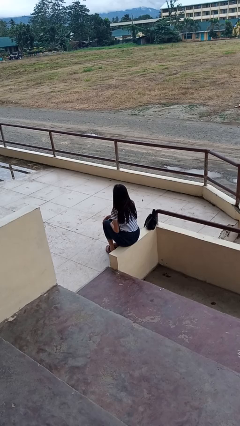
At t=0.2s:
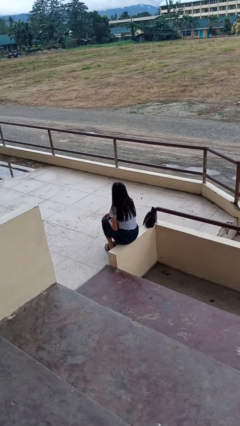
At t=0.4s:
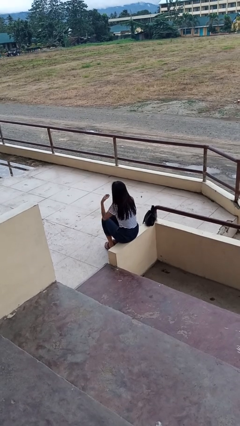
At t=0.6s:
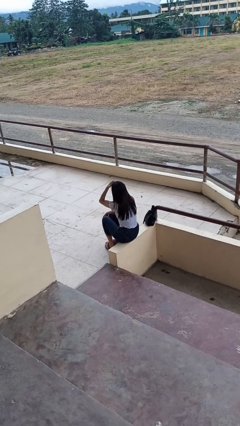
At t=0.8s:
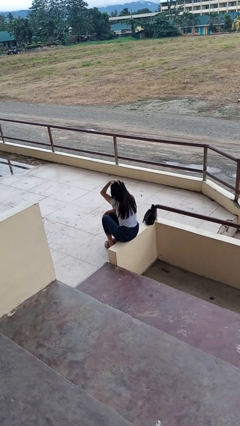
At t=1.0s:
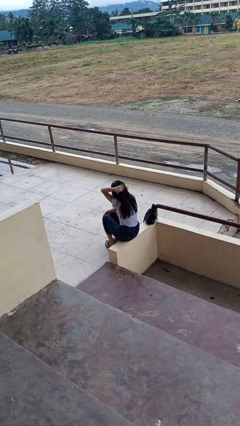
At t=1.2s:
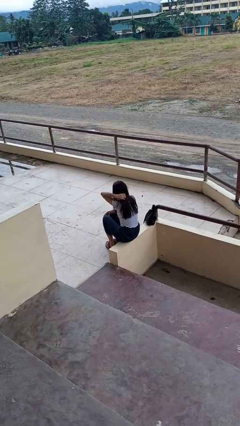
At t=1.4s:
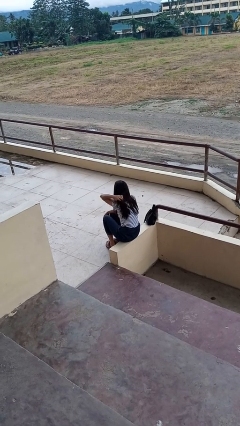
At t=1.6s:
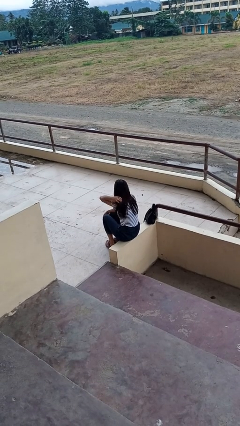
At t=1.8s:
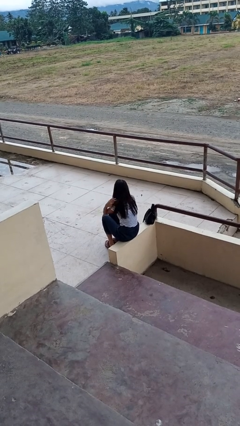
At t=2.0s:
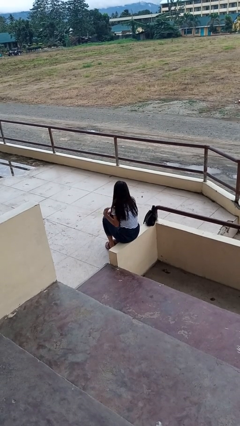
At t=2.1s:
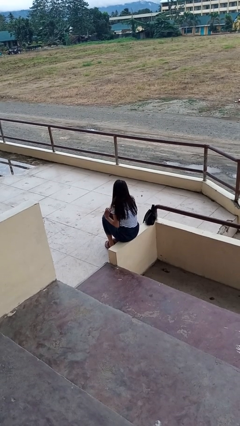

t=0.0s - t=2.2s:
person strokes hair

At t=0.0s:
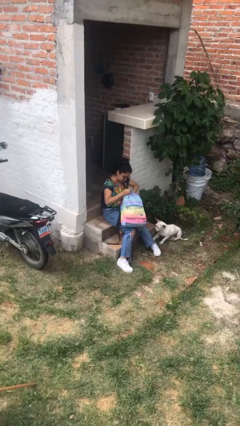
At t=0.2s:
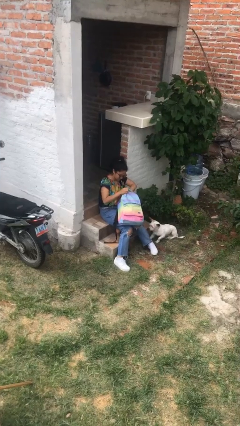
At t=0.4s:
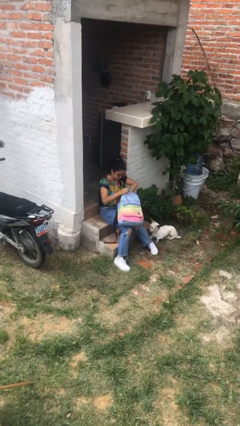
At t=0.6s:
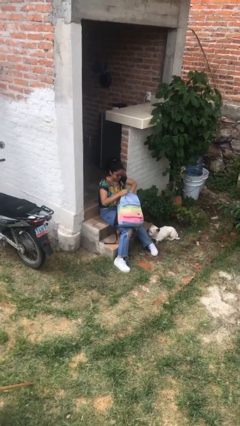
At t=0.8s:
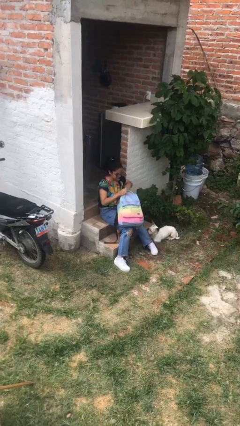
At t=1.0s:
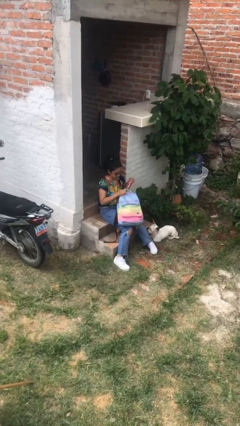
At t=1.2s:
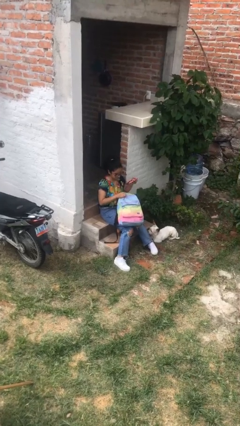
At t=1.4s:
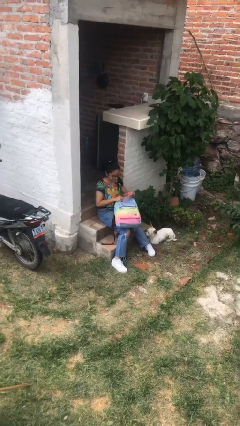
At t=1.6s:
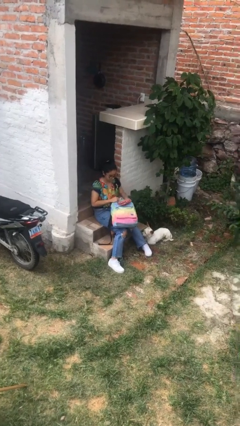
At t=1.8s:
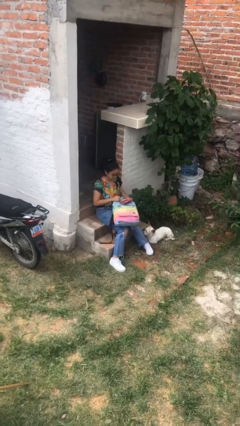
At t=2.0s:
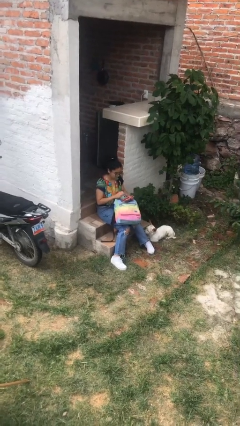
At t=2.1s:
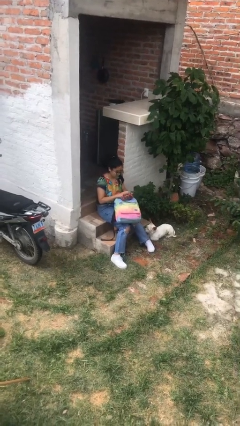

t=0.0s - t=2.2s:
person takes object from backpack

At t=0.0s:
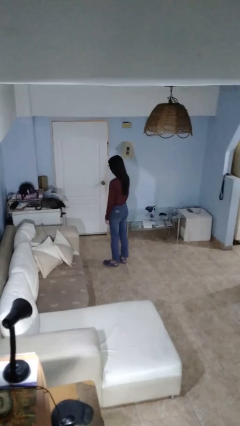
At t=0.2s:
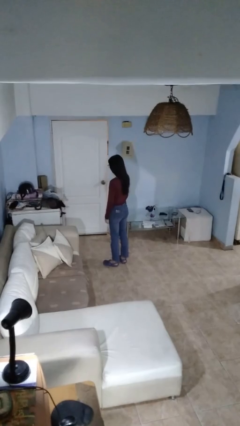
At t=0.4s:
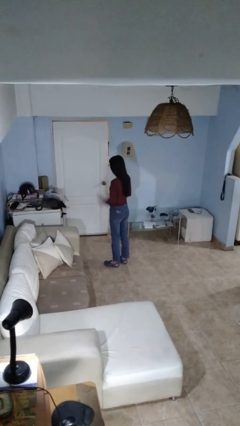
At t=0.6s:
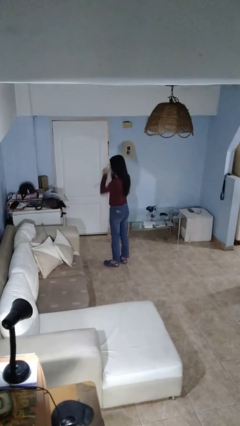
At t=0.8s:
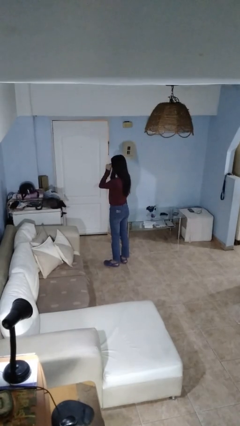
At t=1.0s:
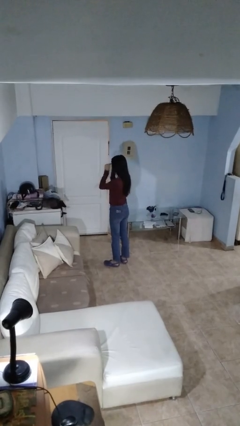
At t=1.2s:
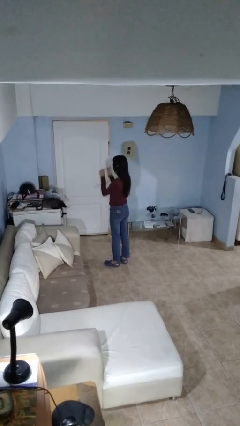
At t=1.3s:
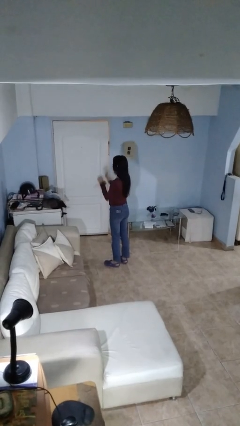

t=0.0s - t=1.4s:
person takes off glasses

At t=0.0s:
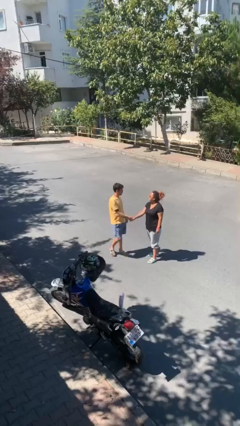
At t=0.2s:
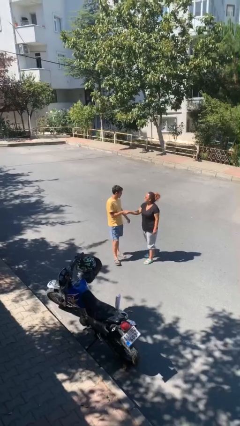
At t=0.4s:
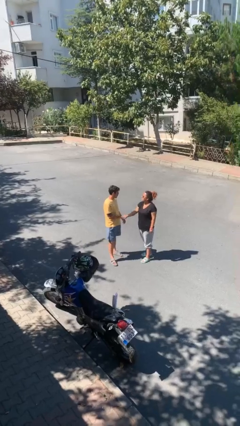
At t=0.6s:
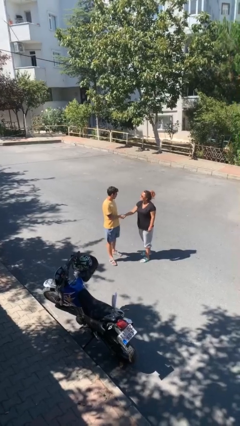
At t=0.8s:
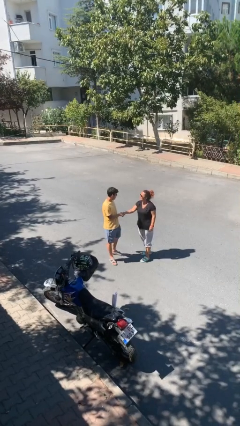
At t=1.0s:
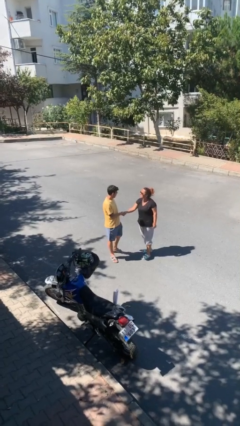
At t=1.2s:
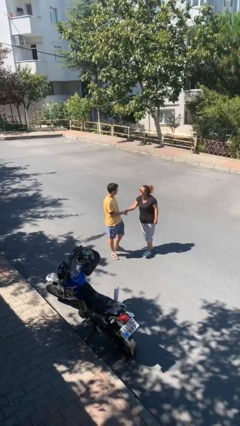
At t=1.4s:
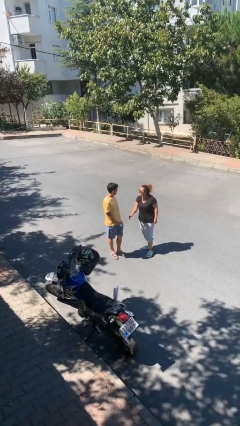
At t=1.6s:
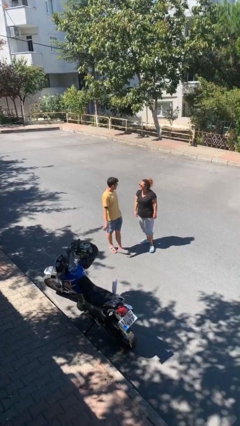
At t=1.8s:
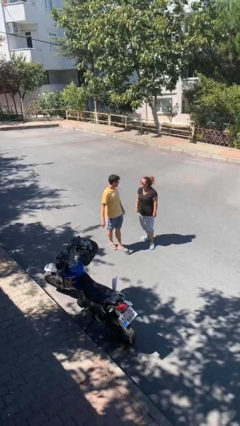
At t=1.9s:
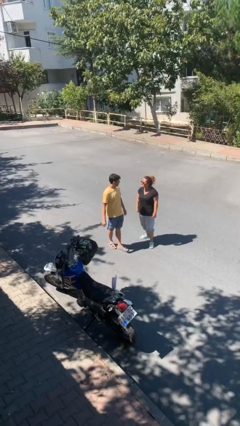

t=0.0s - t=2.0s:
person shakes hand

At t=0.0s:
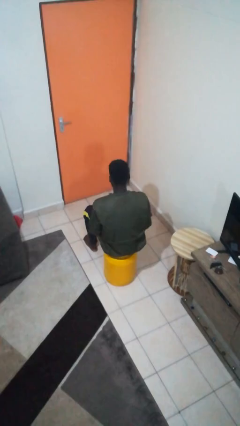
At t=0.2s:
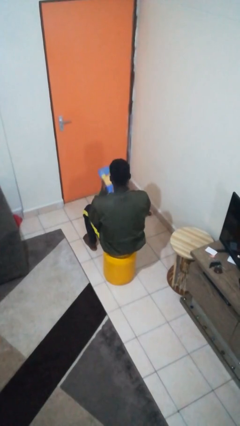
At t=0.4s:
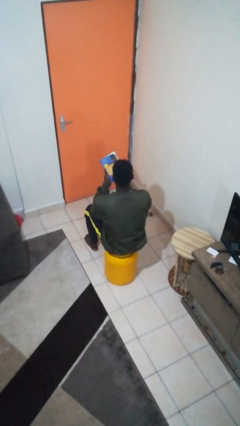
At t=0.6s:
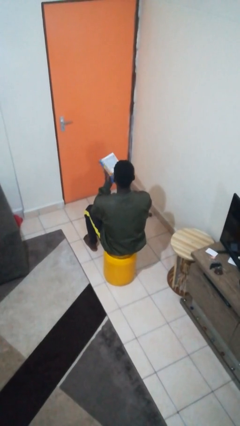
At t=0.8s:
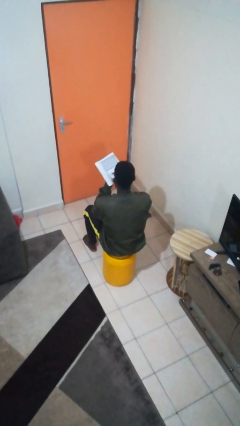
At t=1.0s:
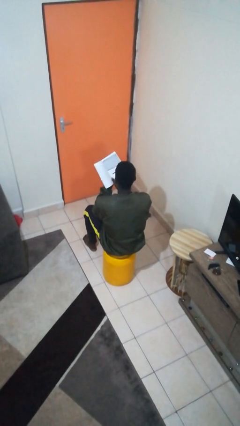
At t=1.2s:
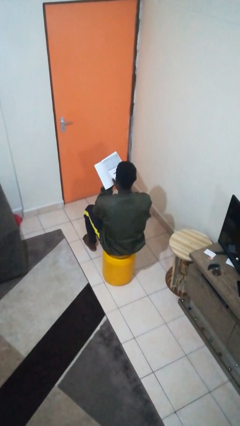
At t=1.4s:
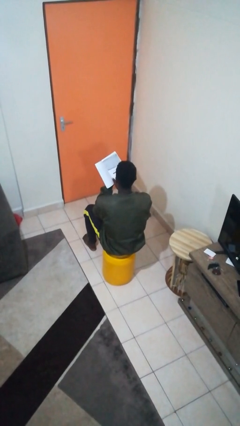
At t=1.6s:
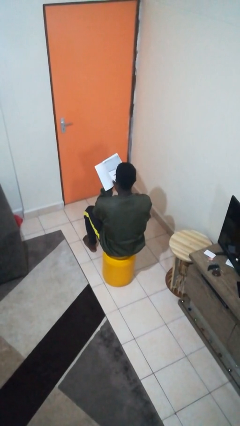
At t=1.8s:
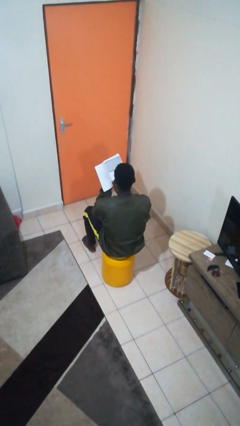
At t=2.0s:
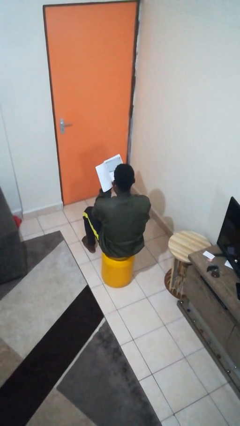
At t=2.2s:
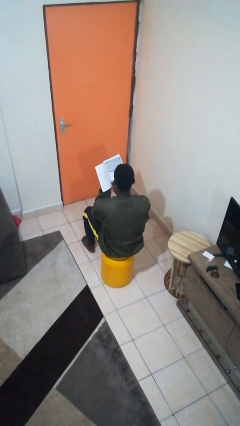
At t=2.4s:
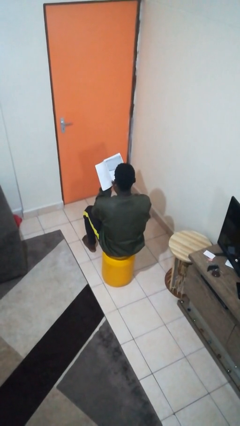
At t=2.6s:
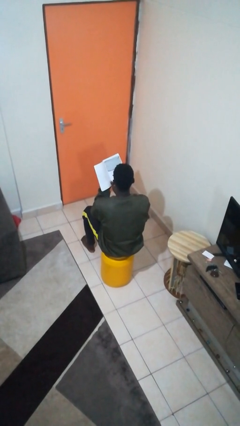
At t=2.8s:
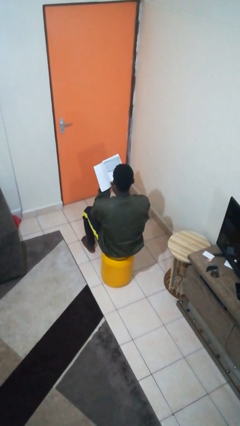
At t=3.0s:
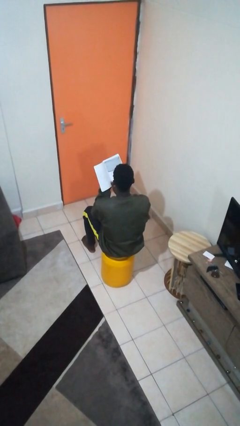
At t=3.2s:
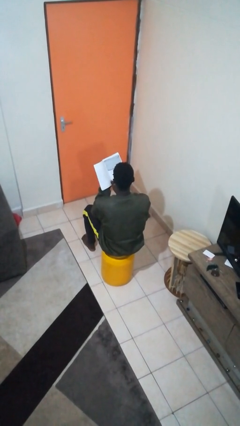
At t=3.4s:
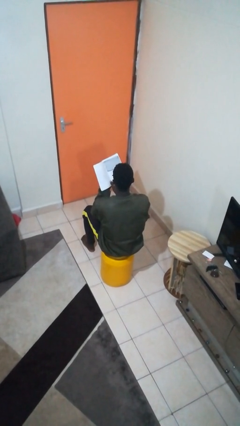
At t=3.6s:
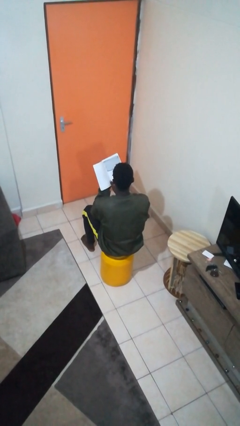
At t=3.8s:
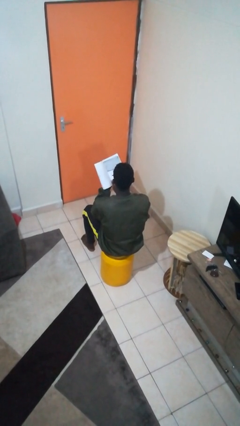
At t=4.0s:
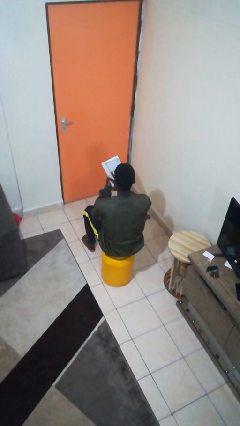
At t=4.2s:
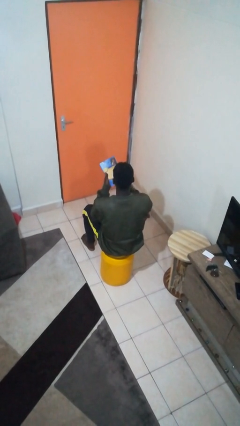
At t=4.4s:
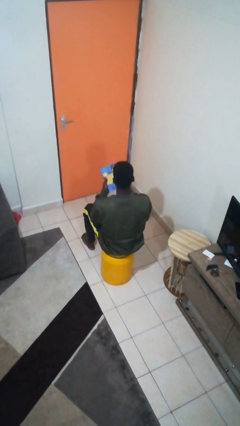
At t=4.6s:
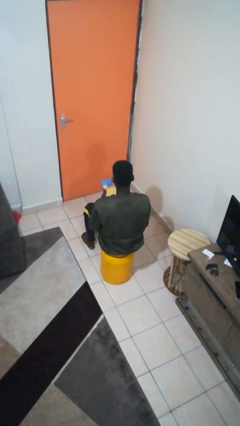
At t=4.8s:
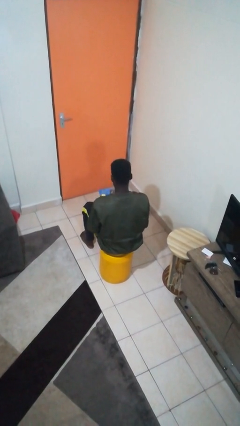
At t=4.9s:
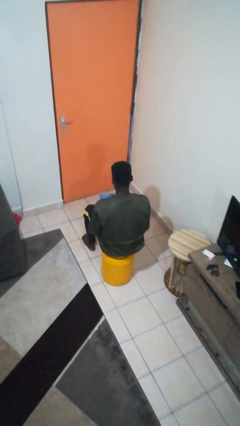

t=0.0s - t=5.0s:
person reads book

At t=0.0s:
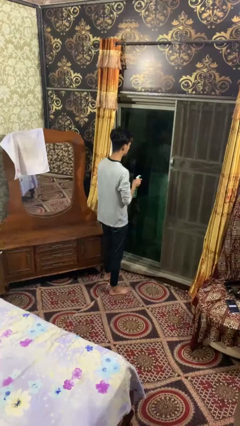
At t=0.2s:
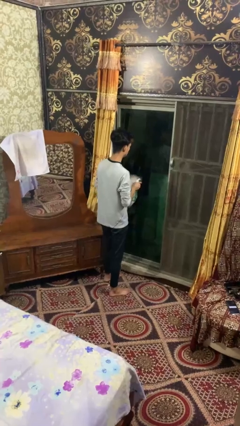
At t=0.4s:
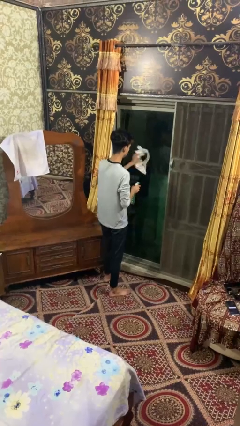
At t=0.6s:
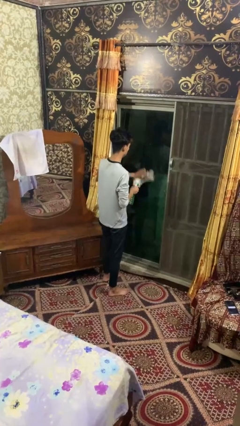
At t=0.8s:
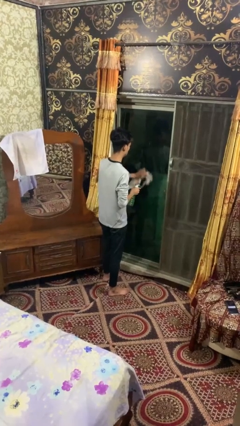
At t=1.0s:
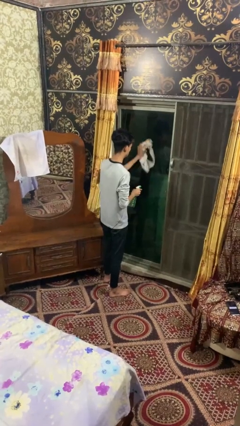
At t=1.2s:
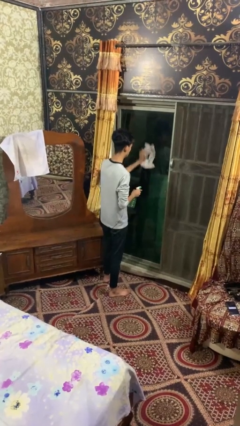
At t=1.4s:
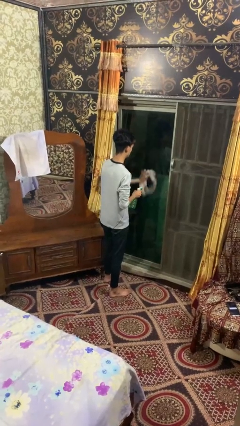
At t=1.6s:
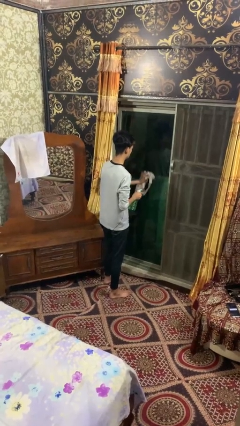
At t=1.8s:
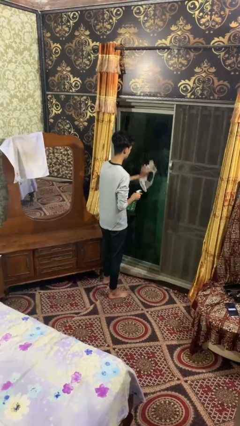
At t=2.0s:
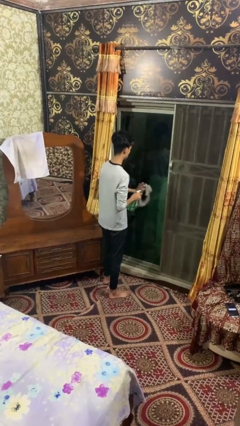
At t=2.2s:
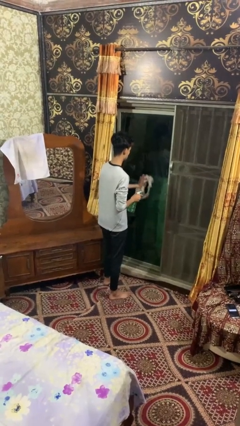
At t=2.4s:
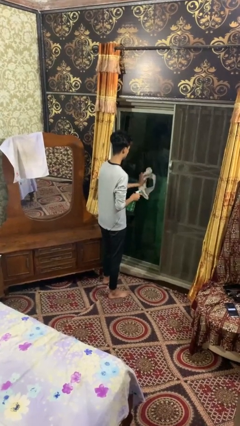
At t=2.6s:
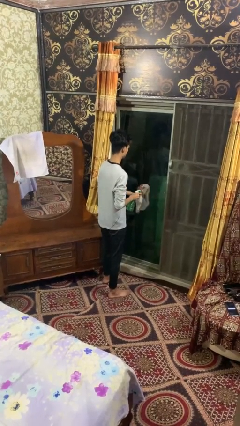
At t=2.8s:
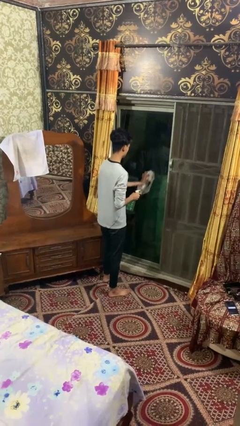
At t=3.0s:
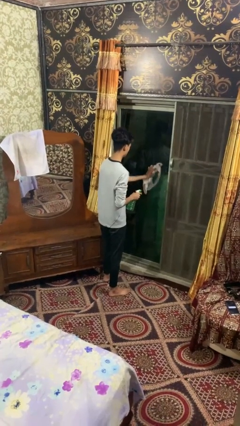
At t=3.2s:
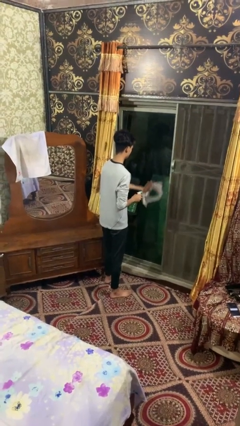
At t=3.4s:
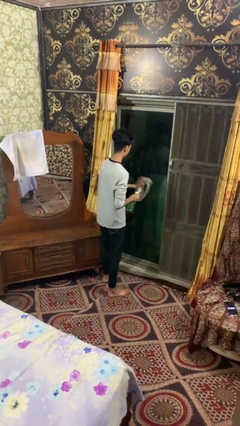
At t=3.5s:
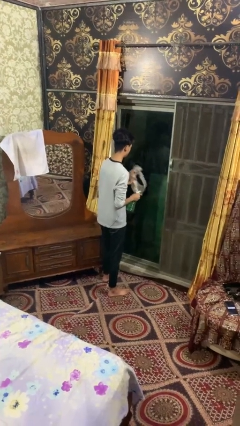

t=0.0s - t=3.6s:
person washes window

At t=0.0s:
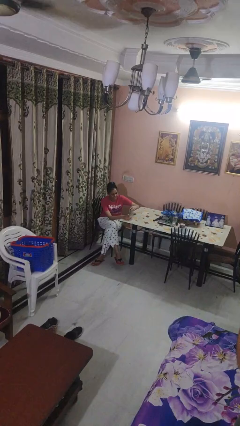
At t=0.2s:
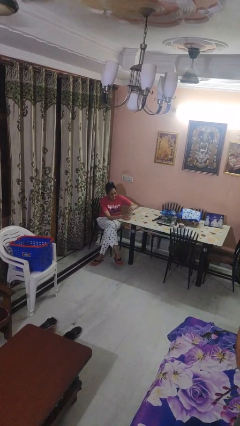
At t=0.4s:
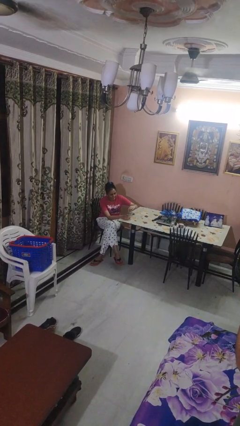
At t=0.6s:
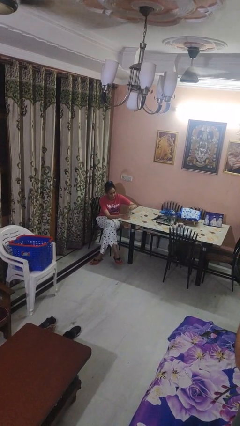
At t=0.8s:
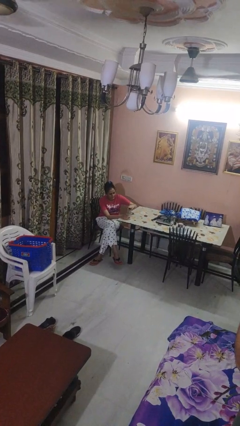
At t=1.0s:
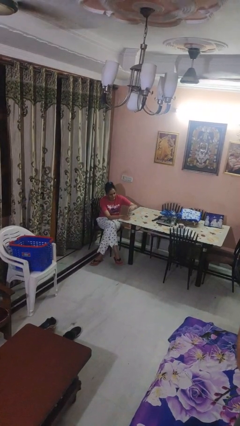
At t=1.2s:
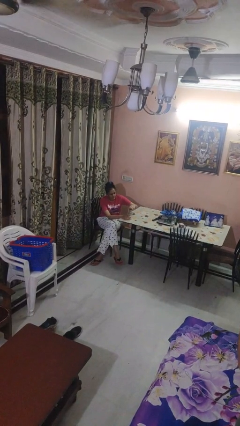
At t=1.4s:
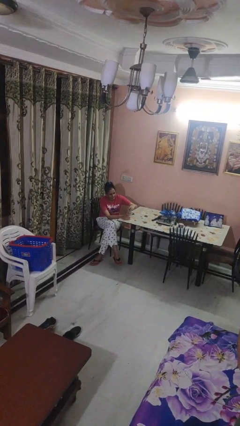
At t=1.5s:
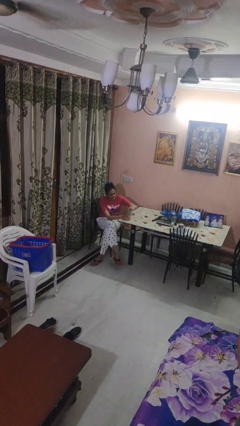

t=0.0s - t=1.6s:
person unscrews lid from bottle
